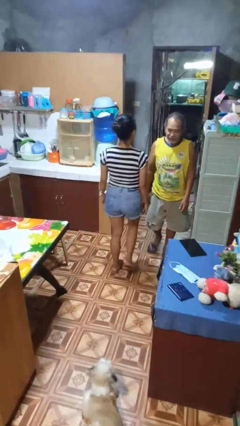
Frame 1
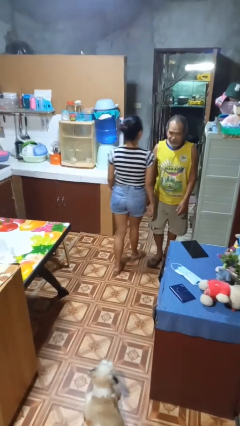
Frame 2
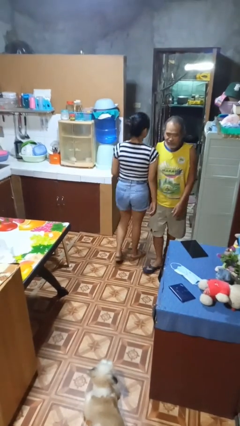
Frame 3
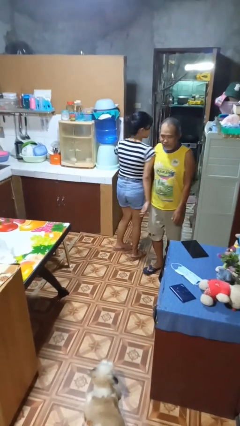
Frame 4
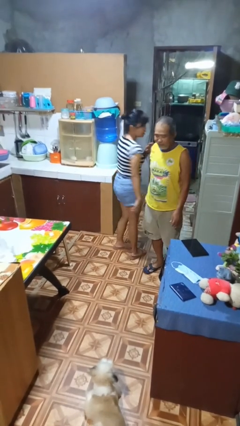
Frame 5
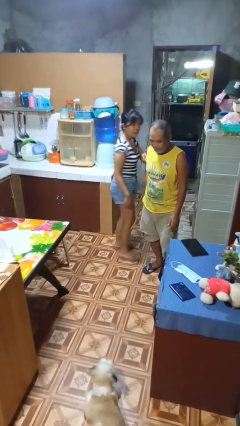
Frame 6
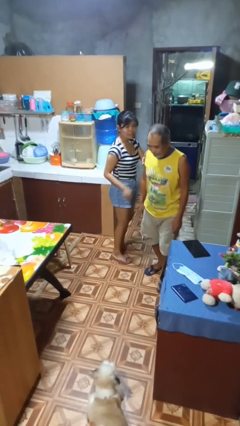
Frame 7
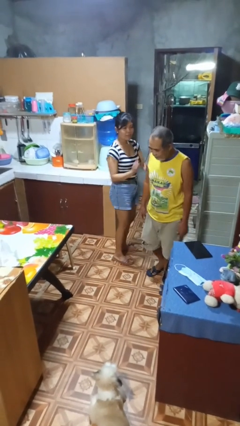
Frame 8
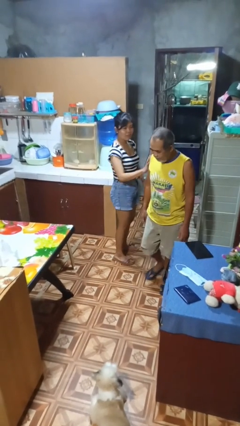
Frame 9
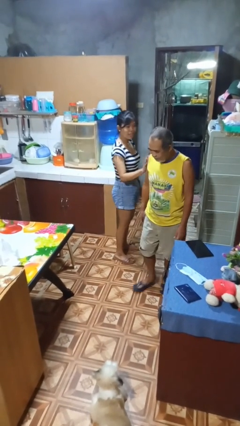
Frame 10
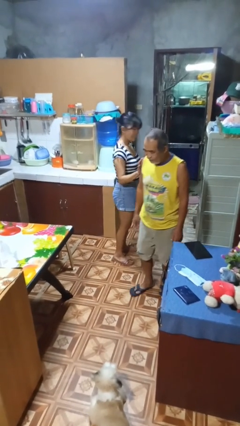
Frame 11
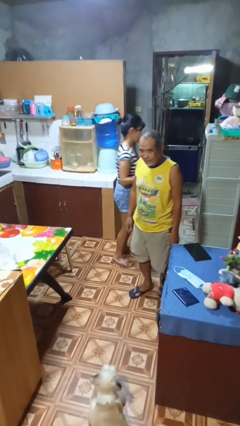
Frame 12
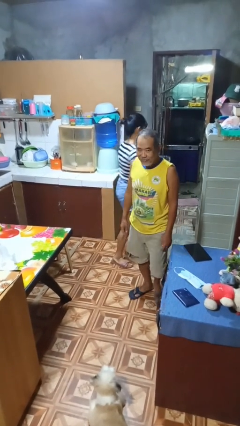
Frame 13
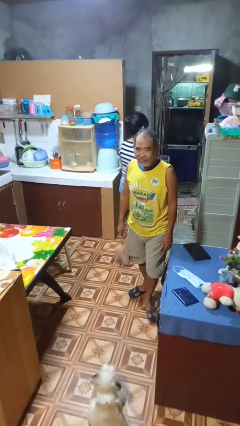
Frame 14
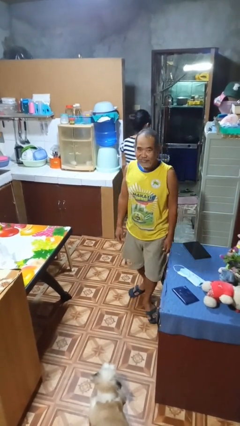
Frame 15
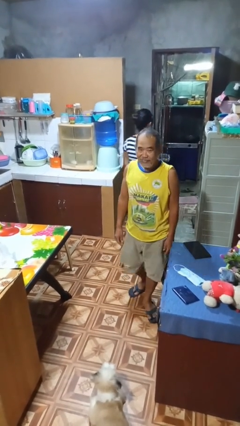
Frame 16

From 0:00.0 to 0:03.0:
person bumps into person

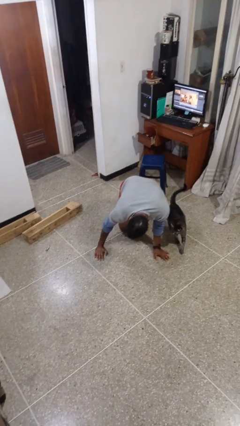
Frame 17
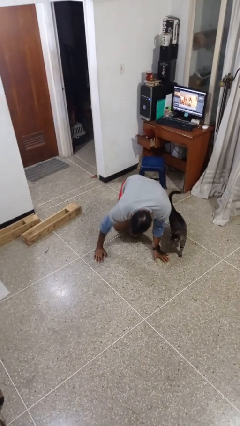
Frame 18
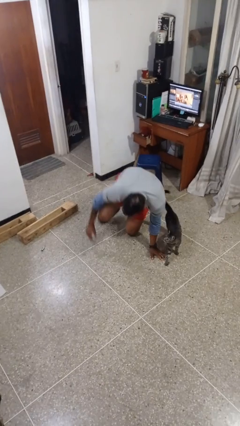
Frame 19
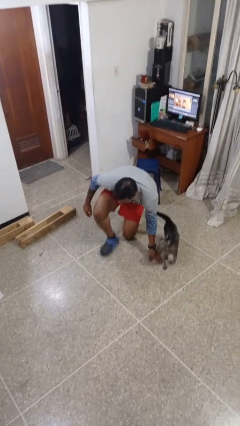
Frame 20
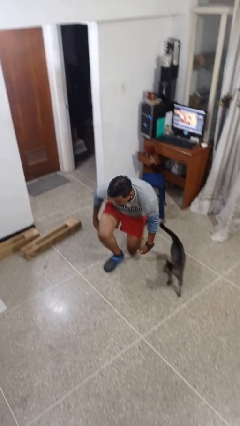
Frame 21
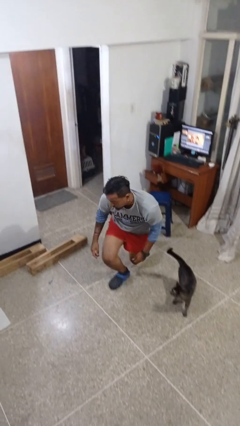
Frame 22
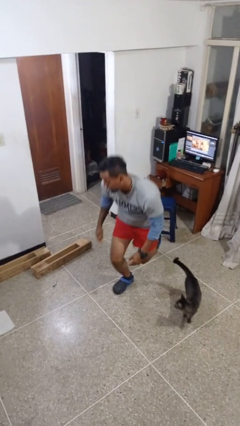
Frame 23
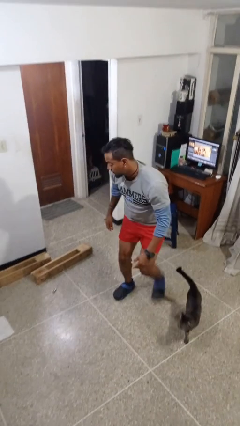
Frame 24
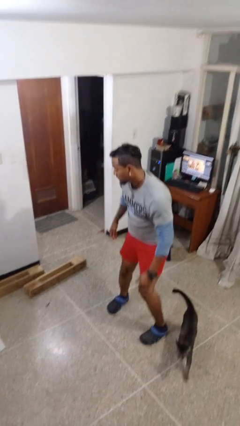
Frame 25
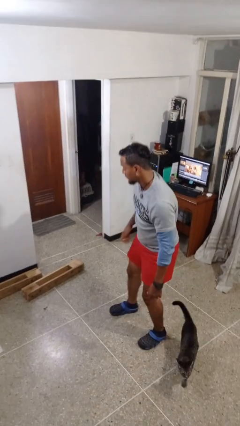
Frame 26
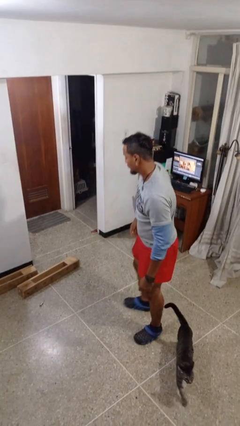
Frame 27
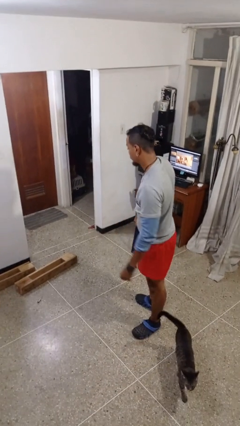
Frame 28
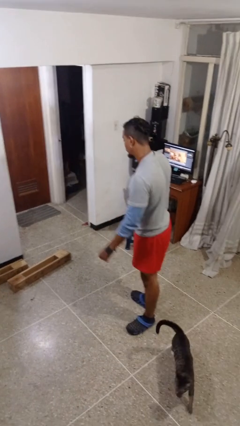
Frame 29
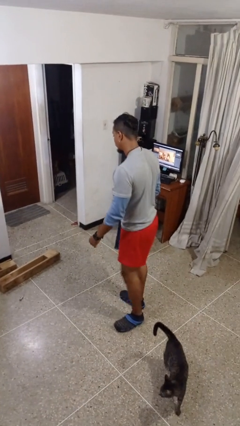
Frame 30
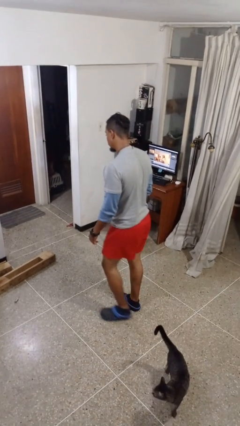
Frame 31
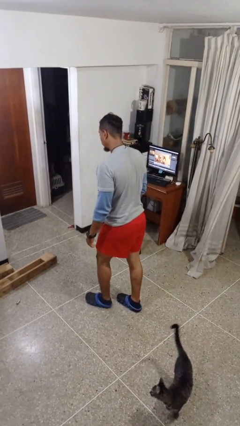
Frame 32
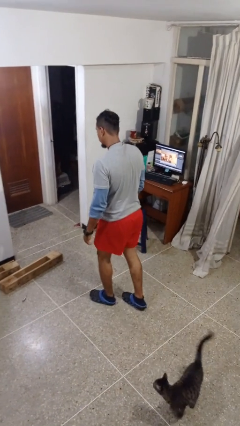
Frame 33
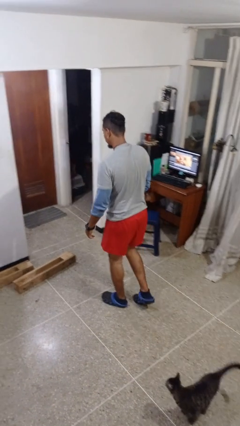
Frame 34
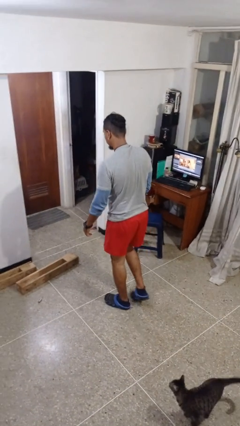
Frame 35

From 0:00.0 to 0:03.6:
person stands up from floor

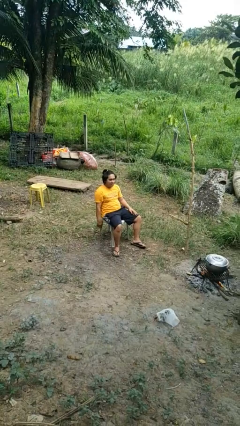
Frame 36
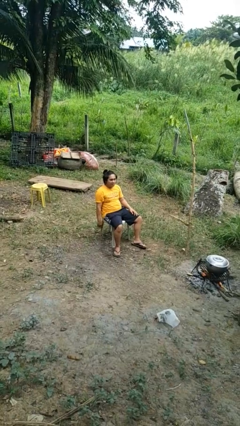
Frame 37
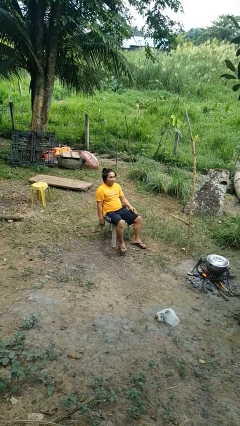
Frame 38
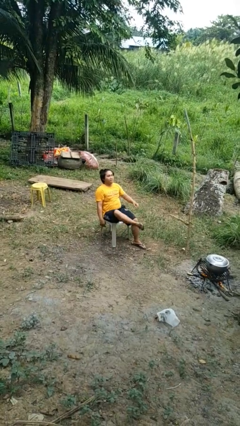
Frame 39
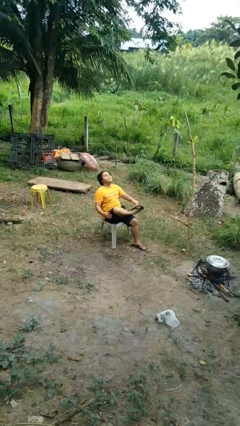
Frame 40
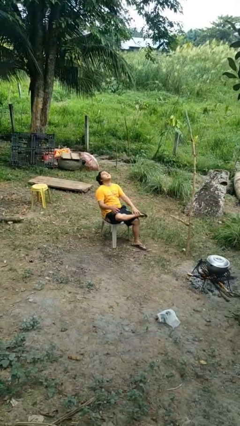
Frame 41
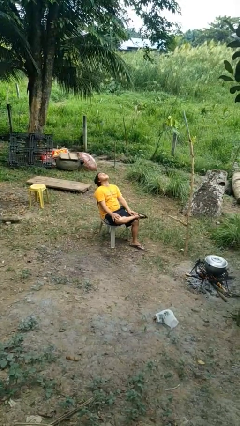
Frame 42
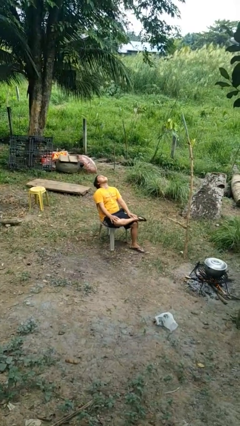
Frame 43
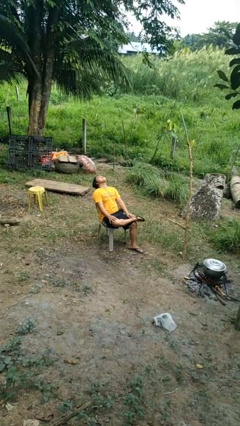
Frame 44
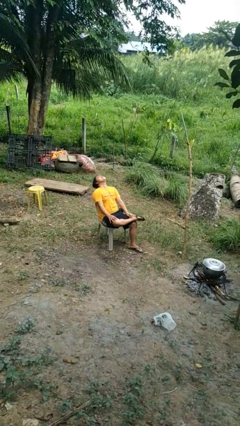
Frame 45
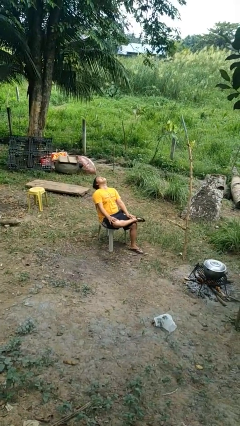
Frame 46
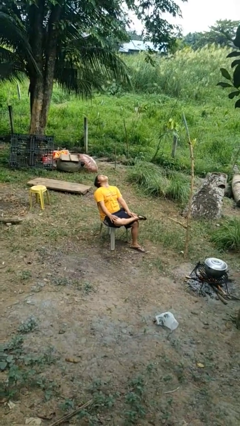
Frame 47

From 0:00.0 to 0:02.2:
person crosses legs

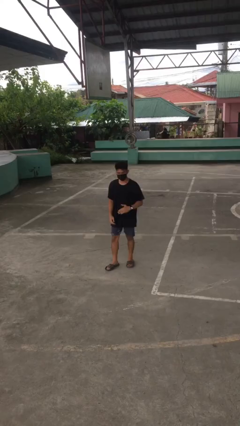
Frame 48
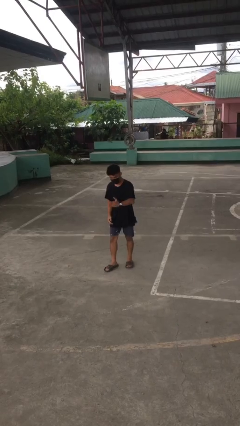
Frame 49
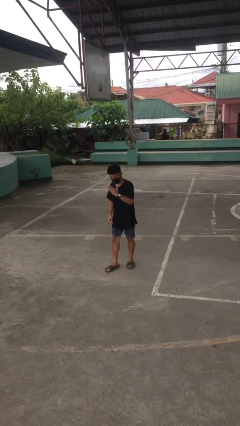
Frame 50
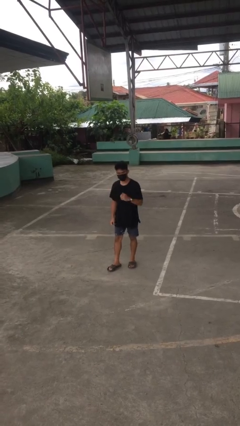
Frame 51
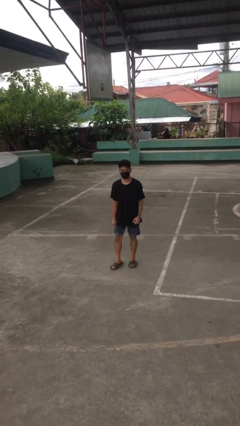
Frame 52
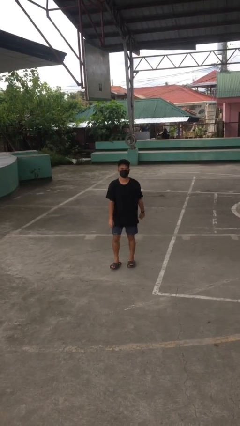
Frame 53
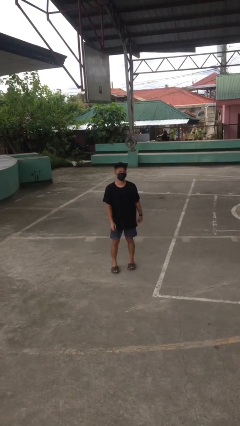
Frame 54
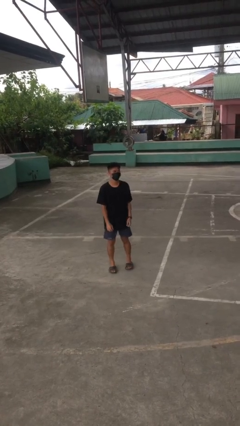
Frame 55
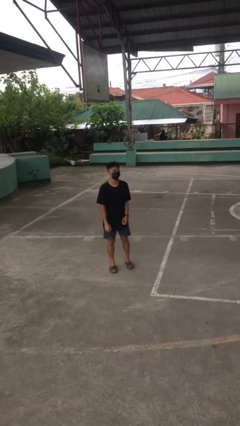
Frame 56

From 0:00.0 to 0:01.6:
person karate chop

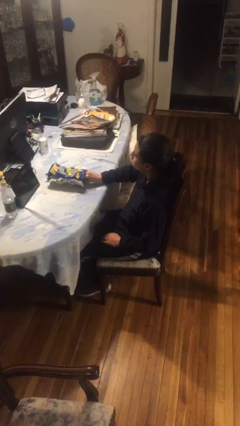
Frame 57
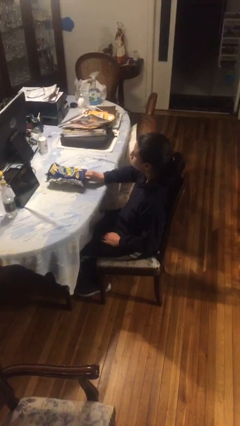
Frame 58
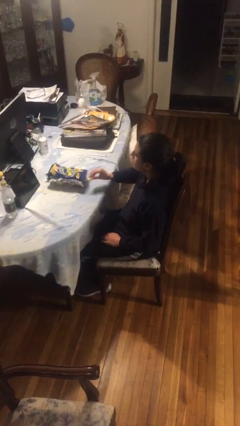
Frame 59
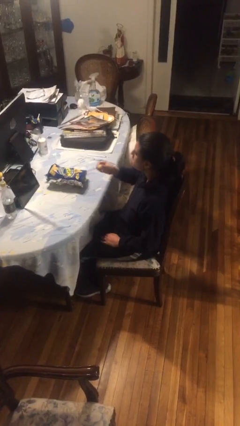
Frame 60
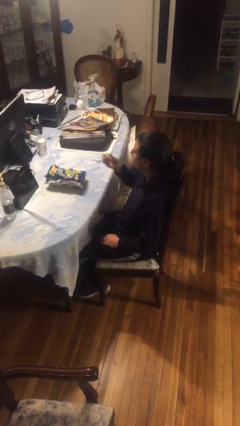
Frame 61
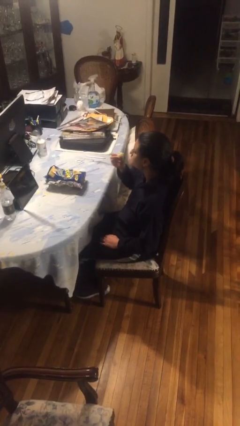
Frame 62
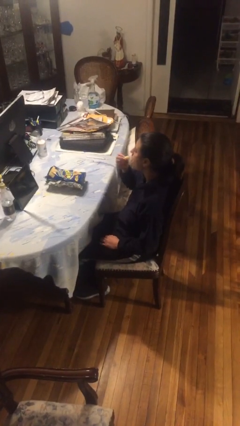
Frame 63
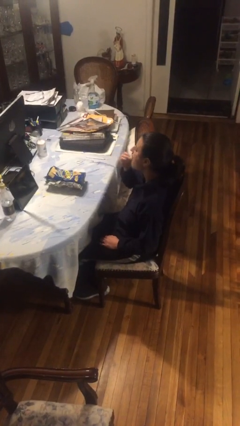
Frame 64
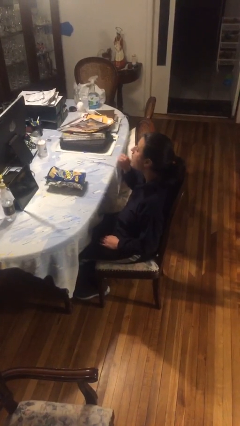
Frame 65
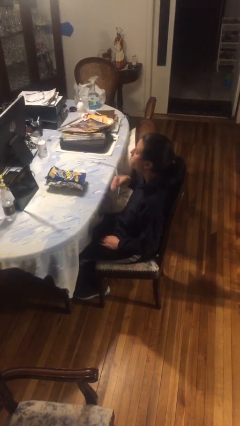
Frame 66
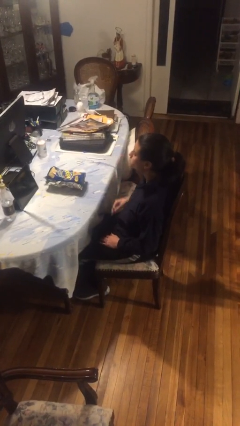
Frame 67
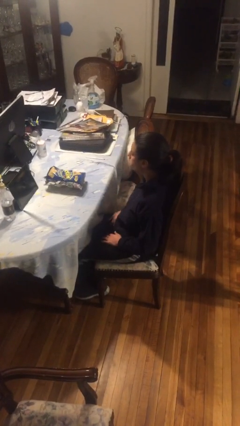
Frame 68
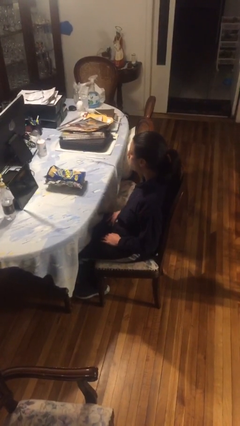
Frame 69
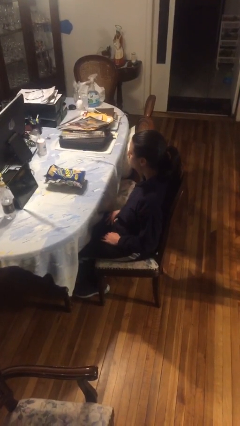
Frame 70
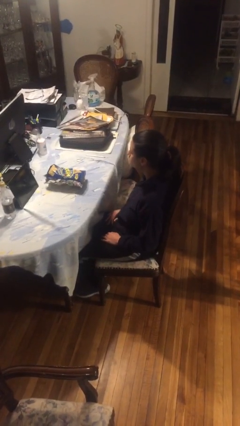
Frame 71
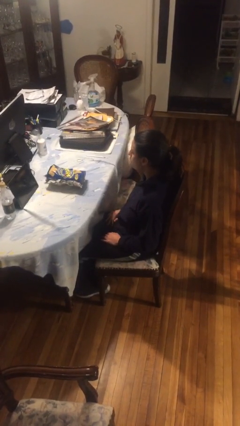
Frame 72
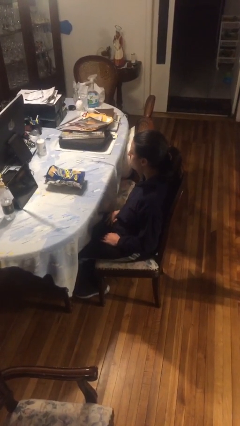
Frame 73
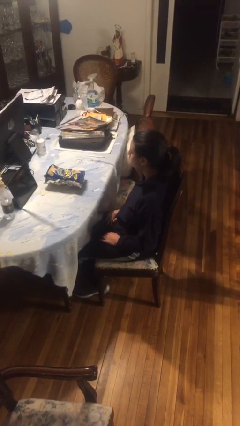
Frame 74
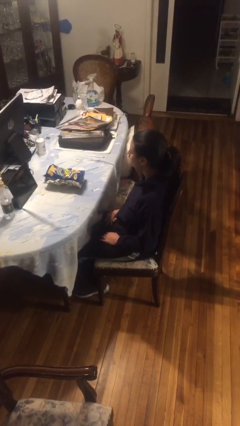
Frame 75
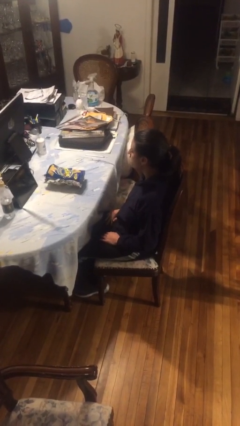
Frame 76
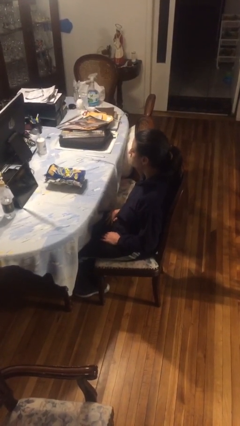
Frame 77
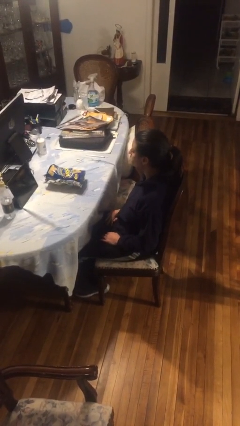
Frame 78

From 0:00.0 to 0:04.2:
person eats snack from bag

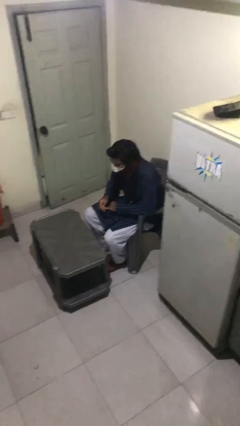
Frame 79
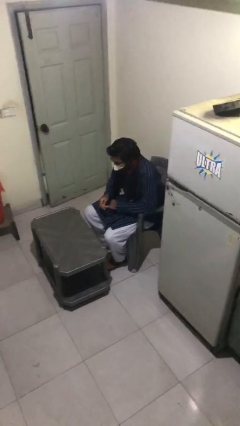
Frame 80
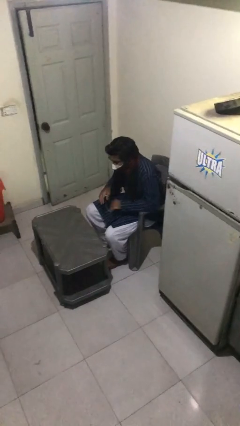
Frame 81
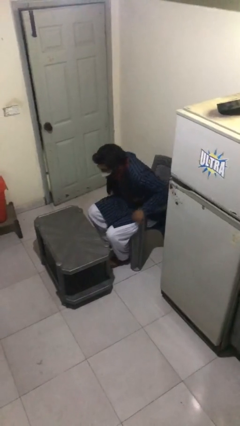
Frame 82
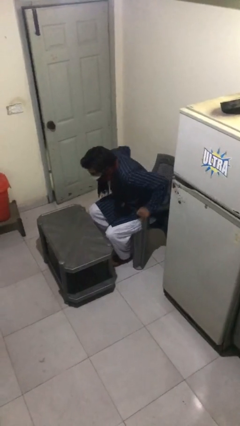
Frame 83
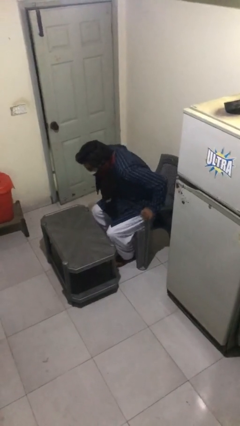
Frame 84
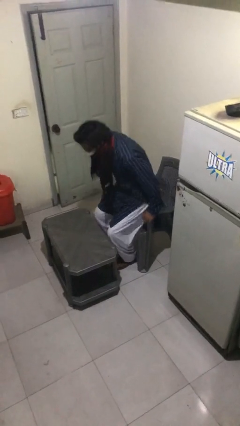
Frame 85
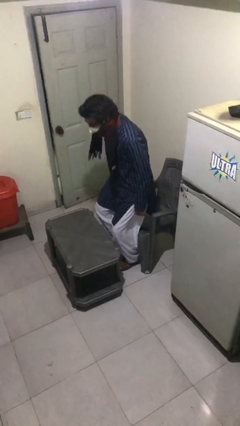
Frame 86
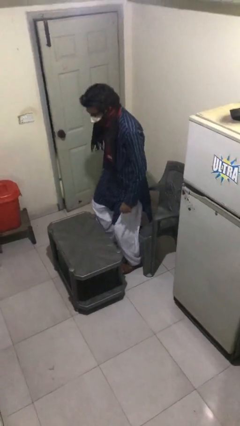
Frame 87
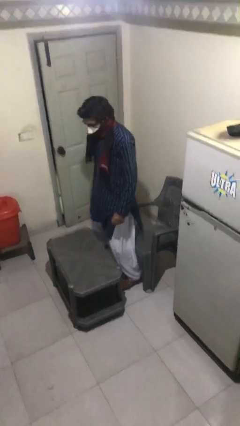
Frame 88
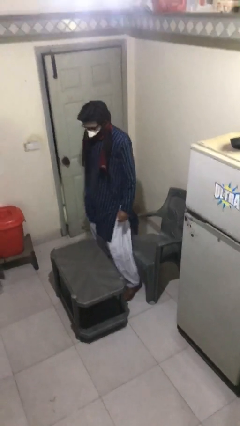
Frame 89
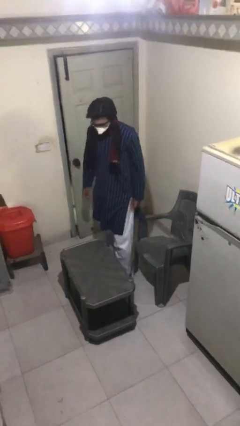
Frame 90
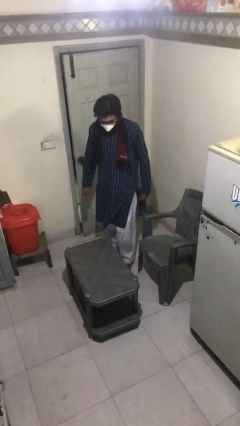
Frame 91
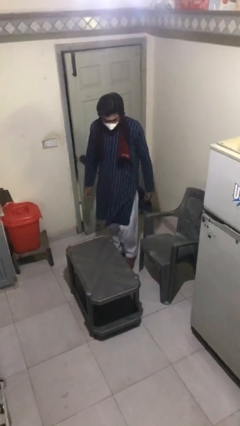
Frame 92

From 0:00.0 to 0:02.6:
person stands up

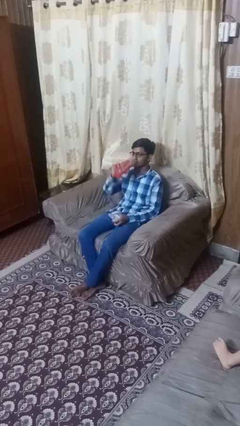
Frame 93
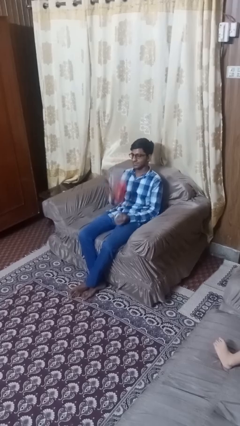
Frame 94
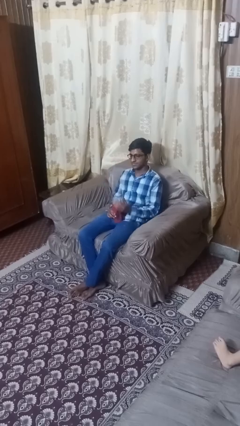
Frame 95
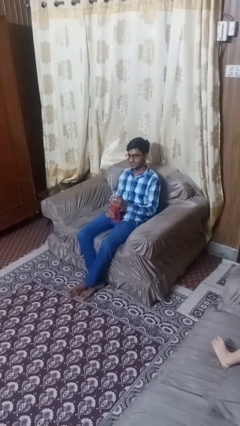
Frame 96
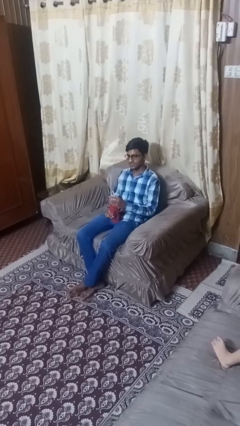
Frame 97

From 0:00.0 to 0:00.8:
person drinks from bottle
